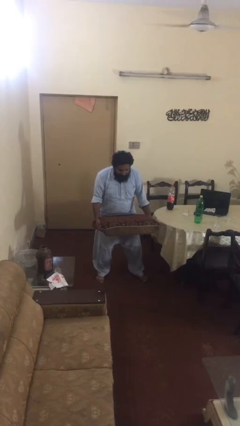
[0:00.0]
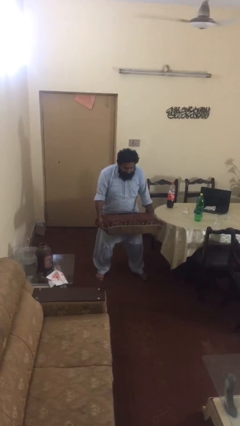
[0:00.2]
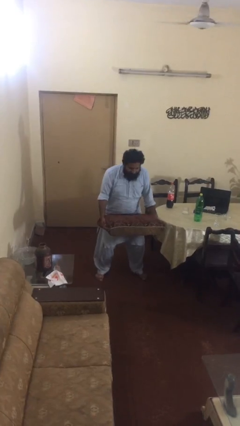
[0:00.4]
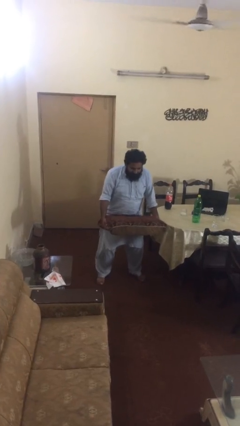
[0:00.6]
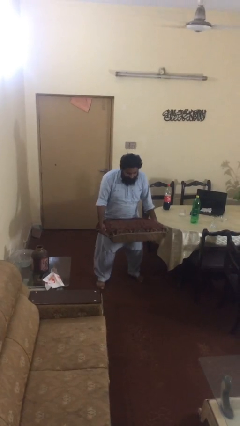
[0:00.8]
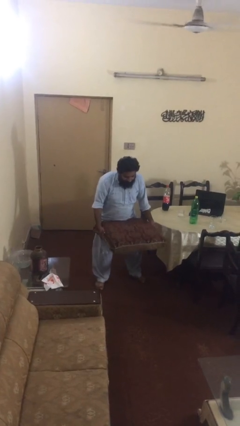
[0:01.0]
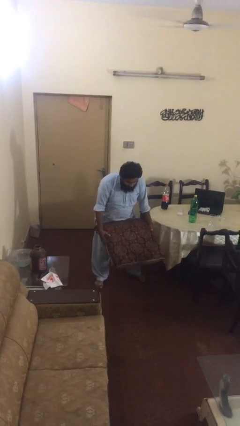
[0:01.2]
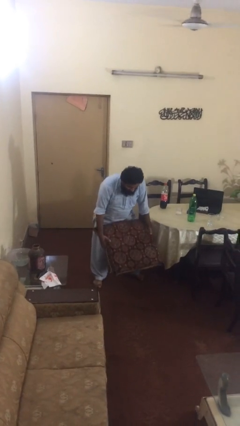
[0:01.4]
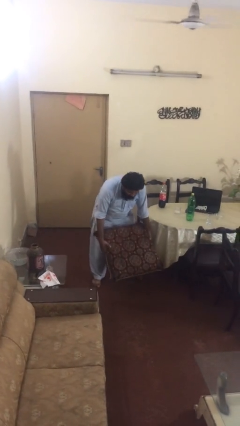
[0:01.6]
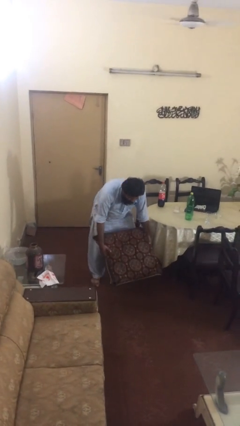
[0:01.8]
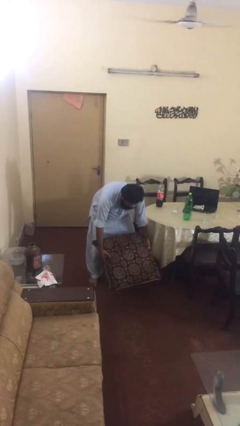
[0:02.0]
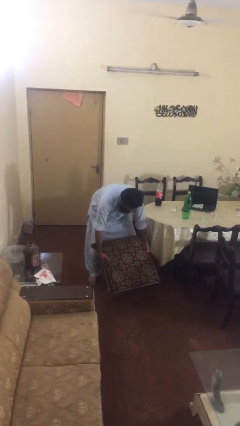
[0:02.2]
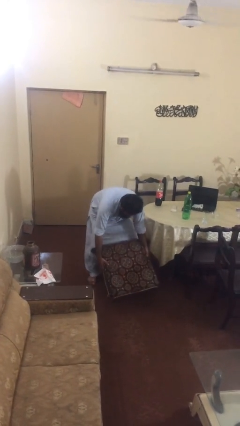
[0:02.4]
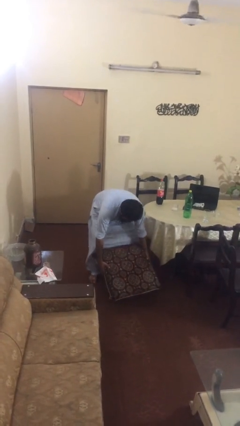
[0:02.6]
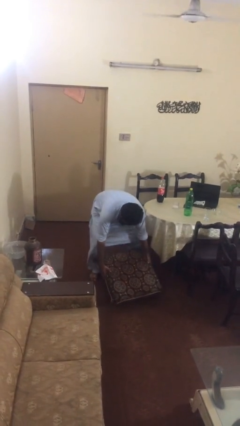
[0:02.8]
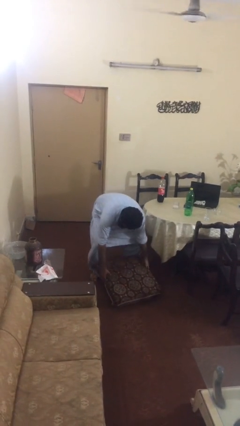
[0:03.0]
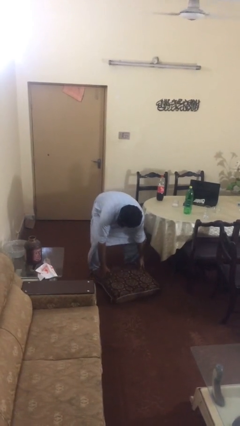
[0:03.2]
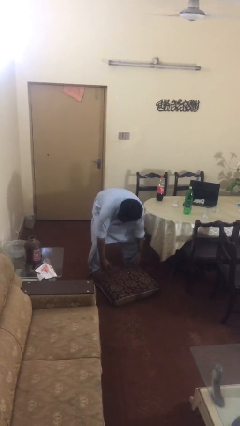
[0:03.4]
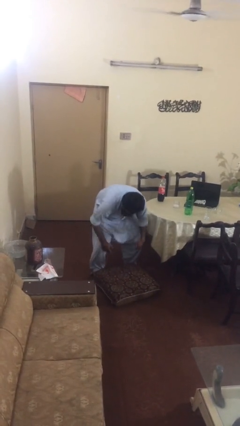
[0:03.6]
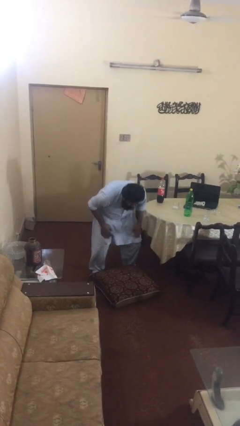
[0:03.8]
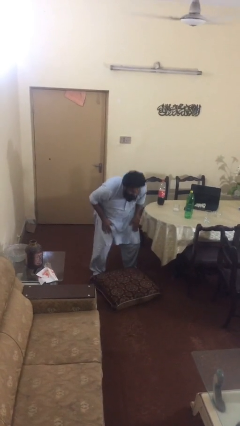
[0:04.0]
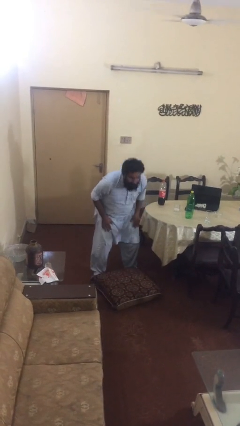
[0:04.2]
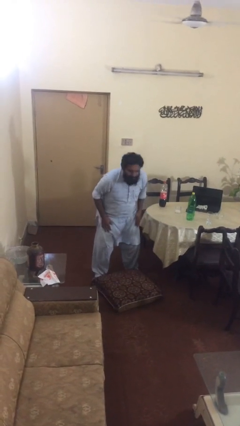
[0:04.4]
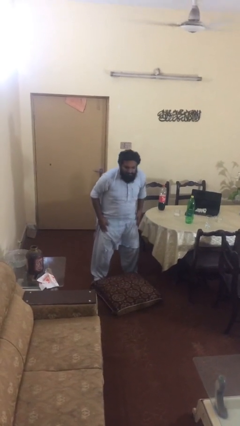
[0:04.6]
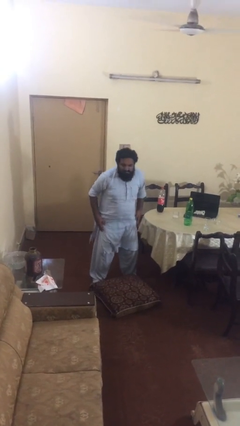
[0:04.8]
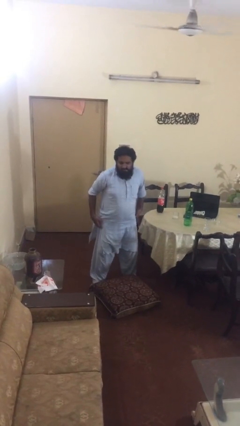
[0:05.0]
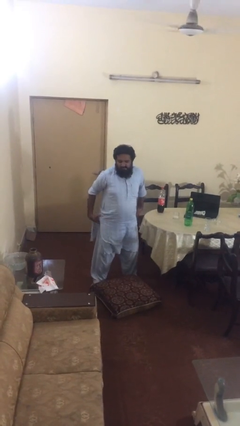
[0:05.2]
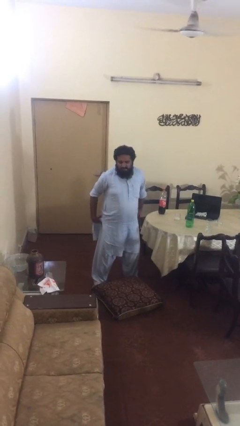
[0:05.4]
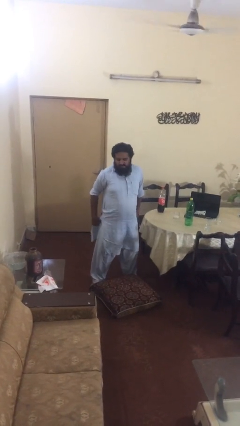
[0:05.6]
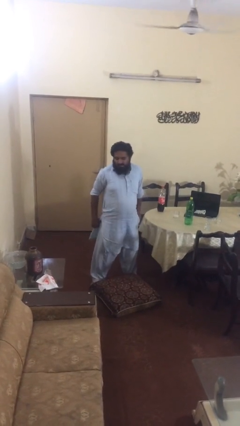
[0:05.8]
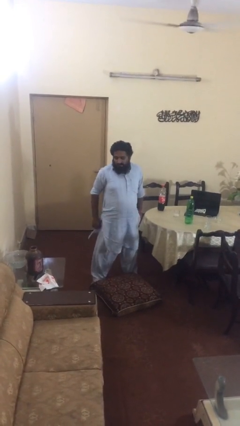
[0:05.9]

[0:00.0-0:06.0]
person puts down object on floor

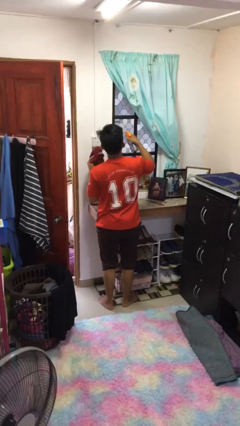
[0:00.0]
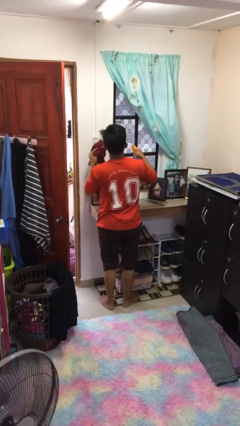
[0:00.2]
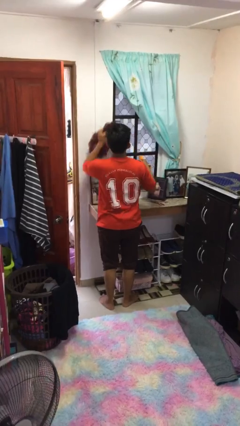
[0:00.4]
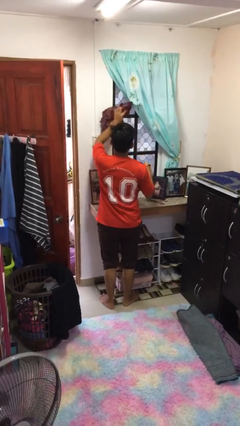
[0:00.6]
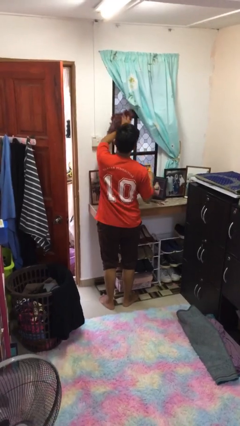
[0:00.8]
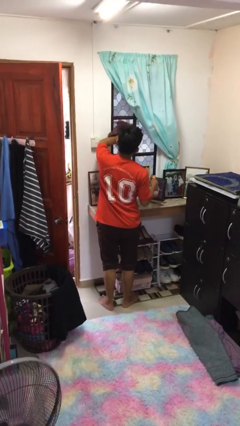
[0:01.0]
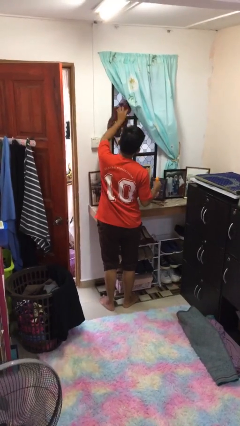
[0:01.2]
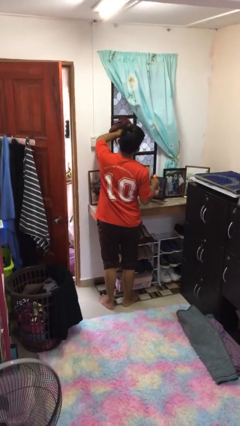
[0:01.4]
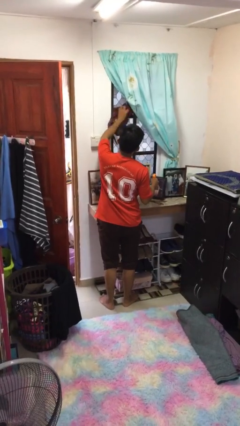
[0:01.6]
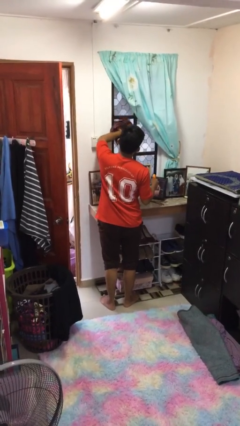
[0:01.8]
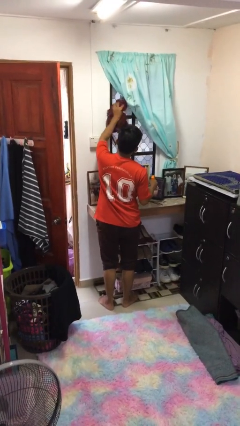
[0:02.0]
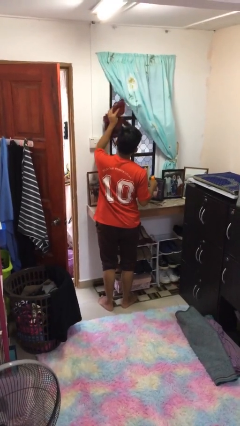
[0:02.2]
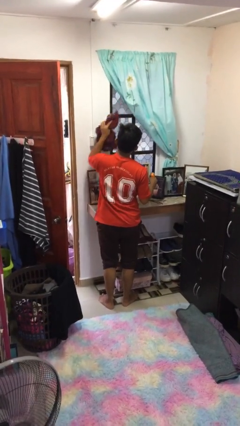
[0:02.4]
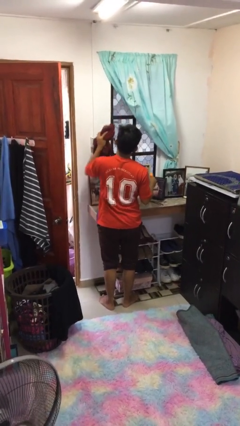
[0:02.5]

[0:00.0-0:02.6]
person washes window

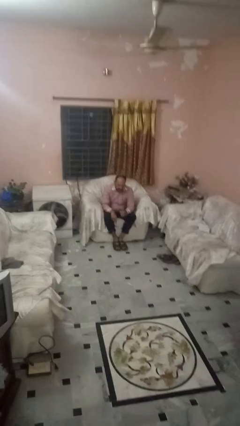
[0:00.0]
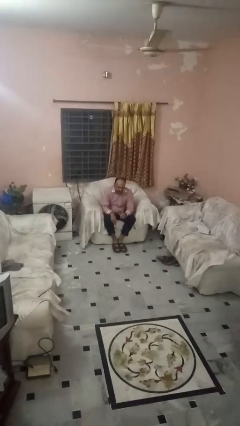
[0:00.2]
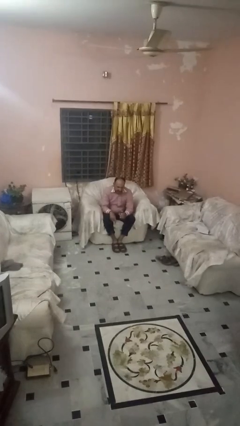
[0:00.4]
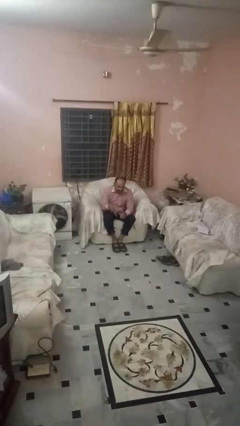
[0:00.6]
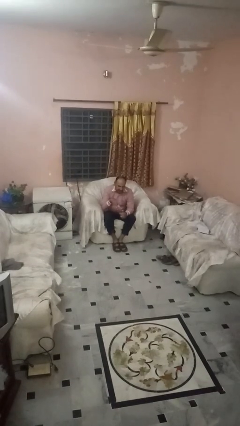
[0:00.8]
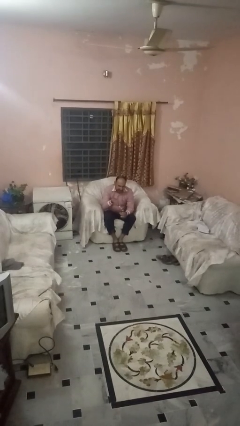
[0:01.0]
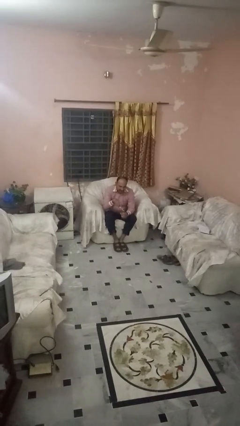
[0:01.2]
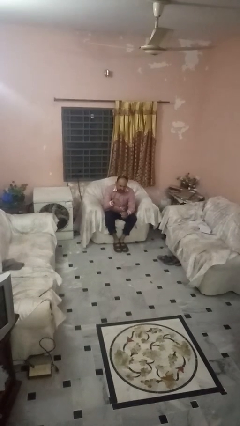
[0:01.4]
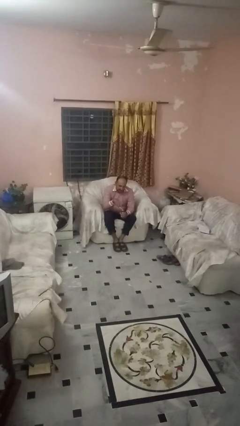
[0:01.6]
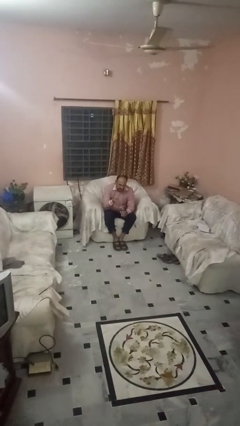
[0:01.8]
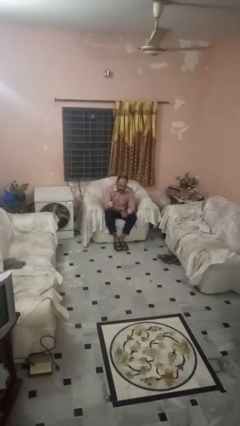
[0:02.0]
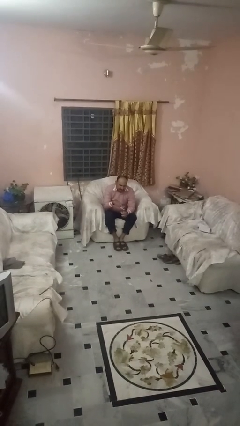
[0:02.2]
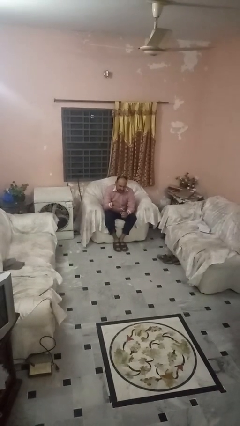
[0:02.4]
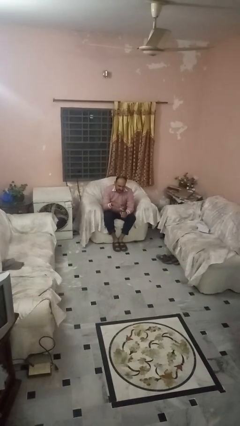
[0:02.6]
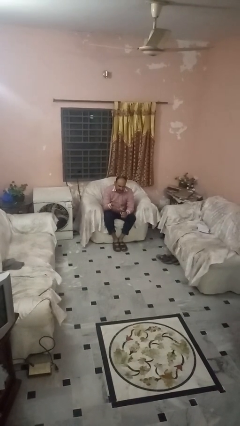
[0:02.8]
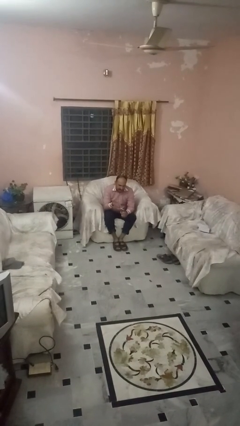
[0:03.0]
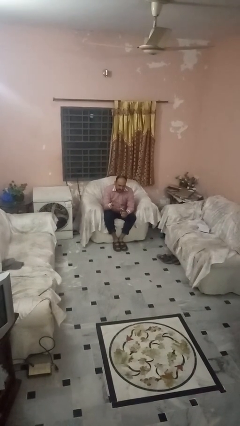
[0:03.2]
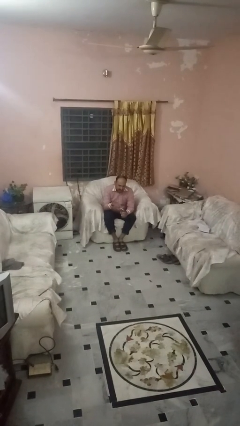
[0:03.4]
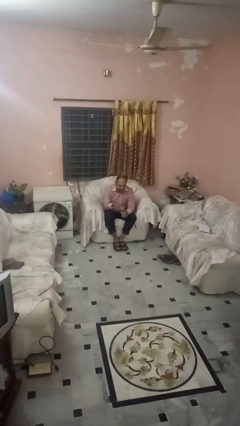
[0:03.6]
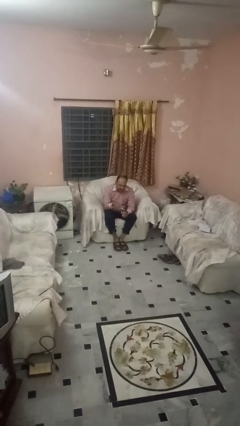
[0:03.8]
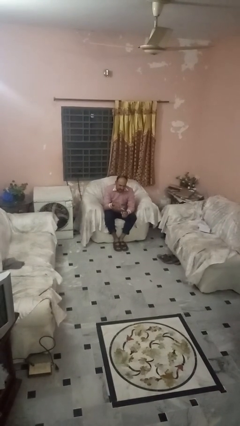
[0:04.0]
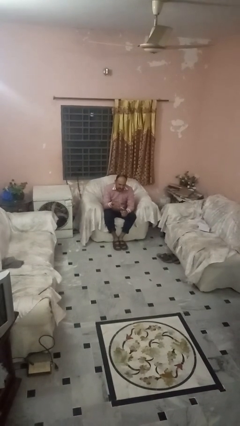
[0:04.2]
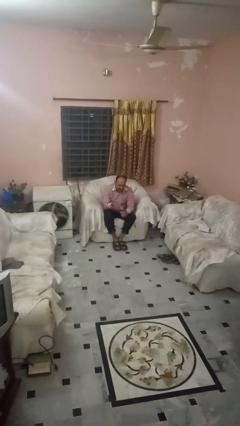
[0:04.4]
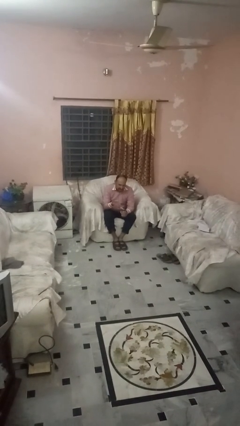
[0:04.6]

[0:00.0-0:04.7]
person opens can with can opener

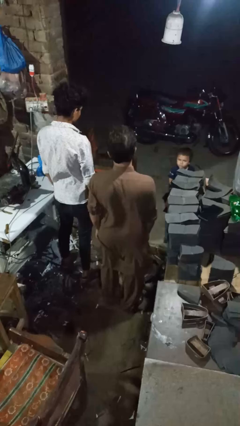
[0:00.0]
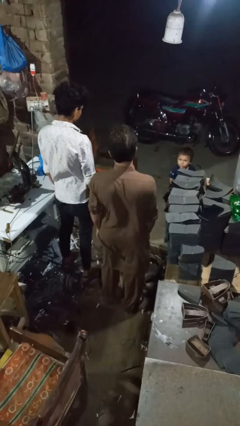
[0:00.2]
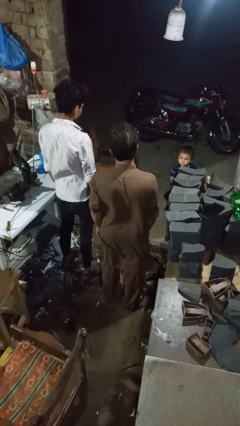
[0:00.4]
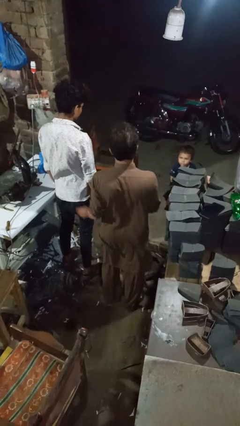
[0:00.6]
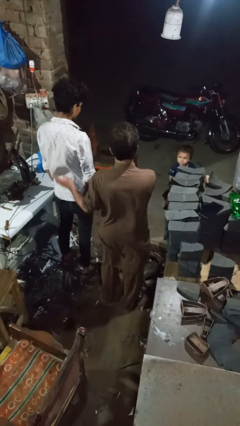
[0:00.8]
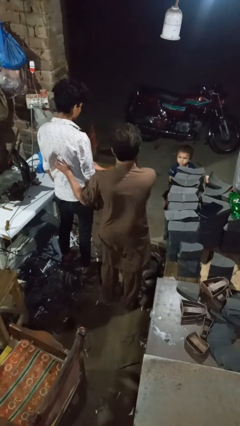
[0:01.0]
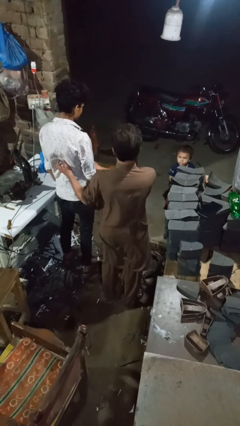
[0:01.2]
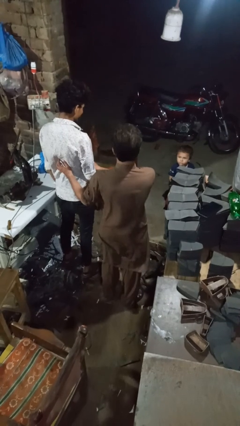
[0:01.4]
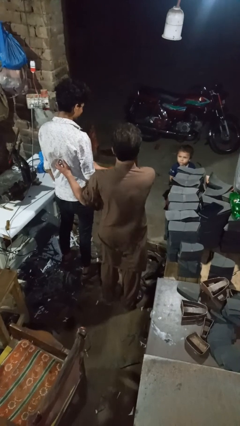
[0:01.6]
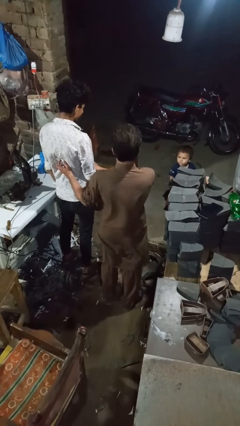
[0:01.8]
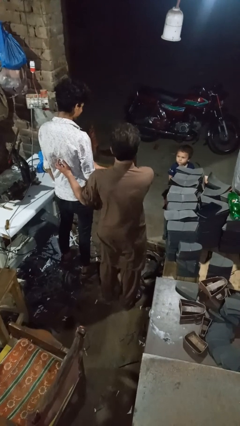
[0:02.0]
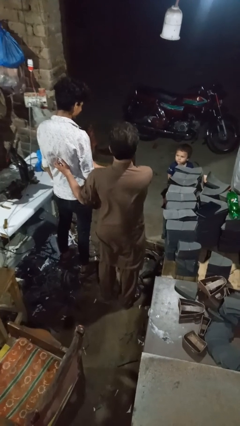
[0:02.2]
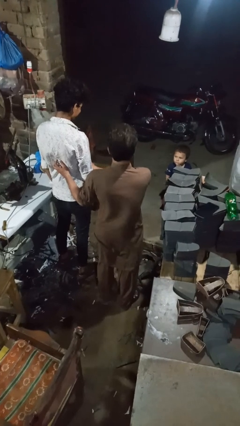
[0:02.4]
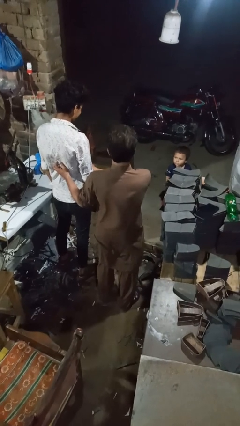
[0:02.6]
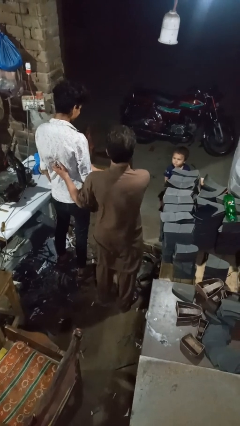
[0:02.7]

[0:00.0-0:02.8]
person tickles person

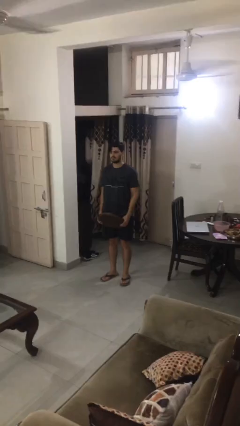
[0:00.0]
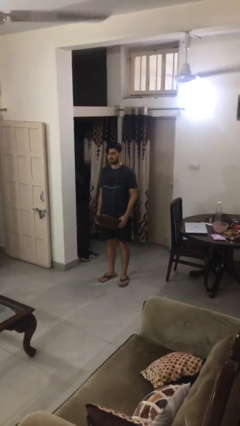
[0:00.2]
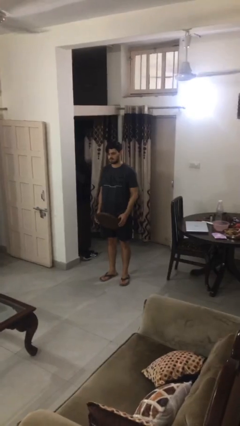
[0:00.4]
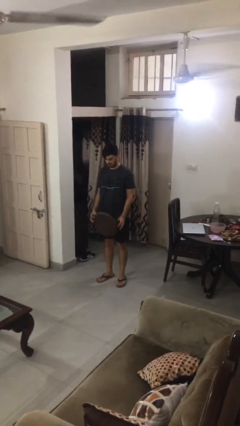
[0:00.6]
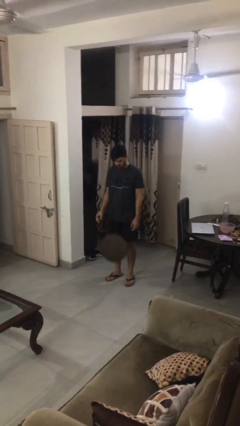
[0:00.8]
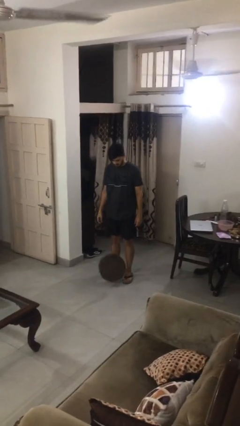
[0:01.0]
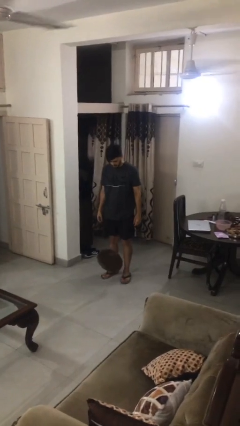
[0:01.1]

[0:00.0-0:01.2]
person drops object

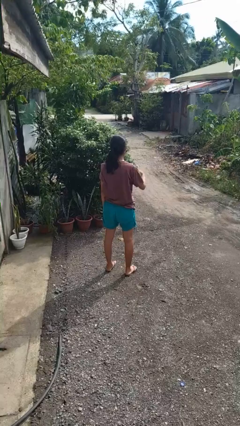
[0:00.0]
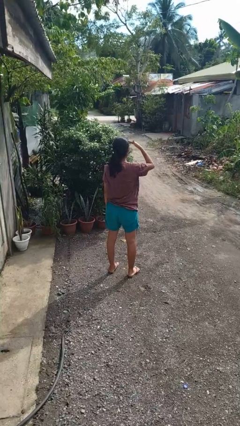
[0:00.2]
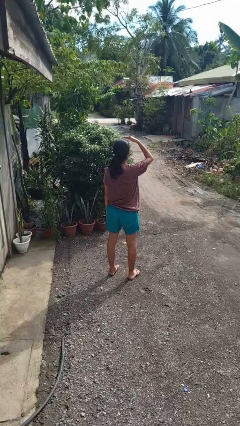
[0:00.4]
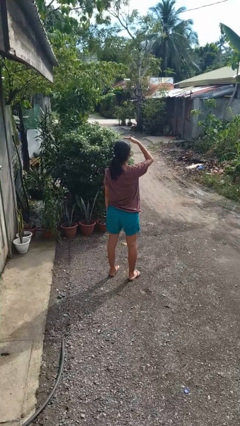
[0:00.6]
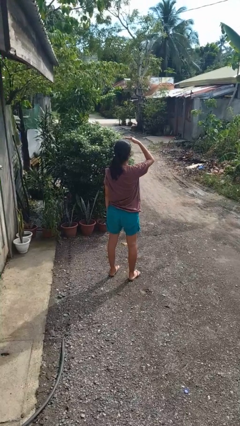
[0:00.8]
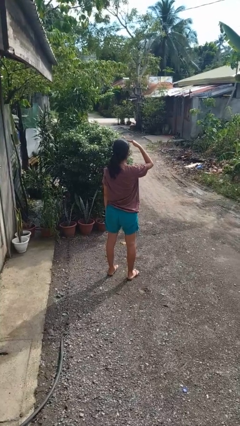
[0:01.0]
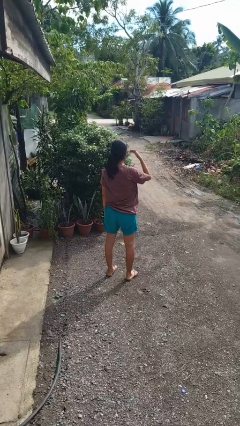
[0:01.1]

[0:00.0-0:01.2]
person shades eyes
